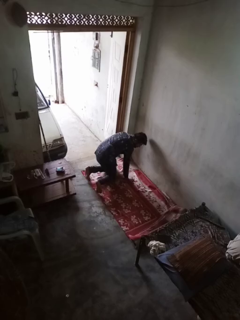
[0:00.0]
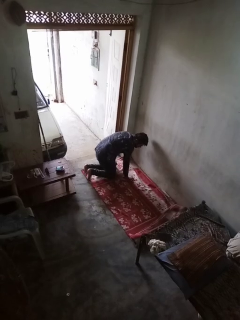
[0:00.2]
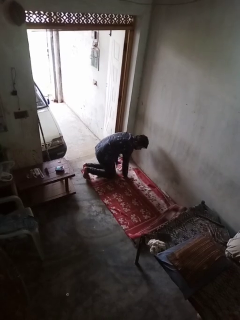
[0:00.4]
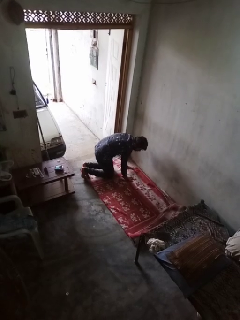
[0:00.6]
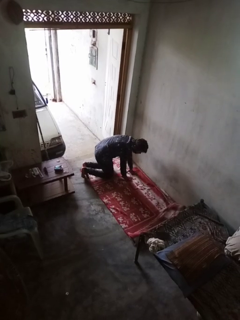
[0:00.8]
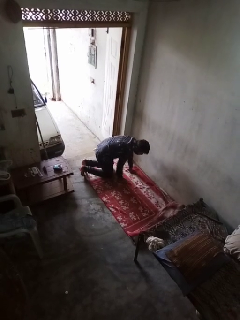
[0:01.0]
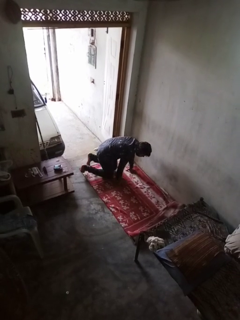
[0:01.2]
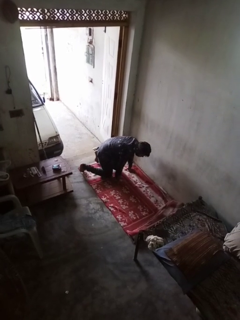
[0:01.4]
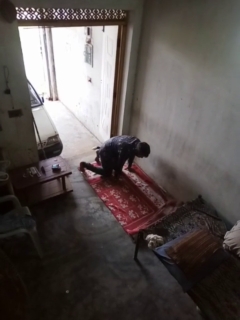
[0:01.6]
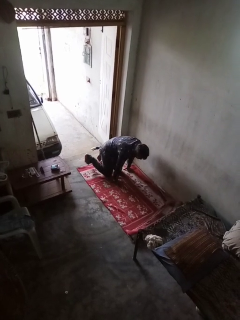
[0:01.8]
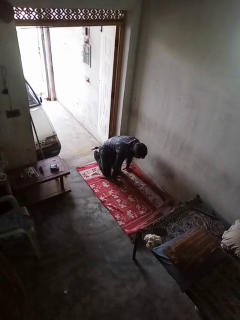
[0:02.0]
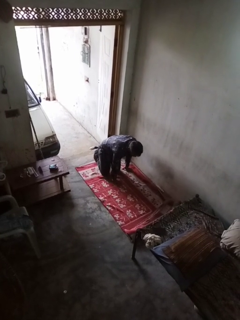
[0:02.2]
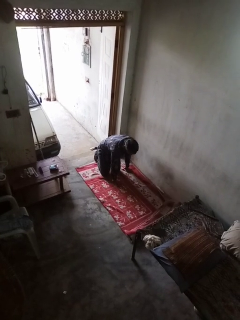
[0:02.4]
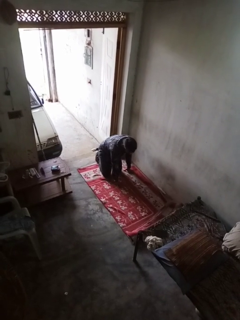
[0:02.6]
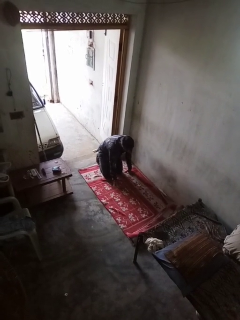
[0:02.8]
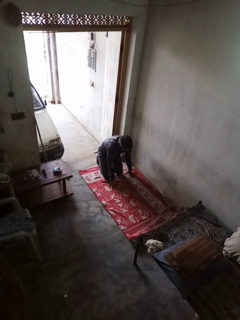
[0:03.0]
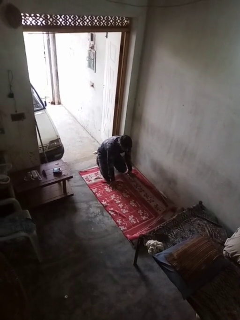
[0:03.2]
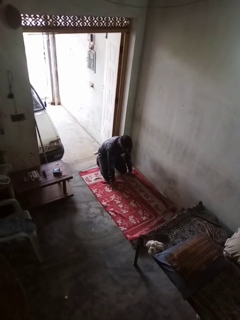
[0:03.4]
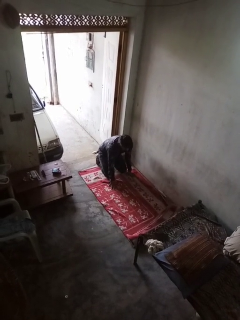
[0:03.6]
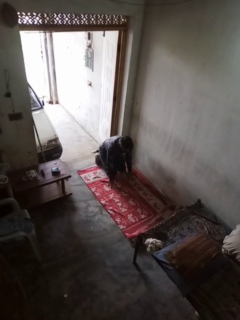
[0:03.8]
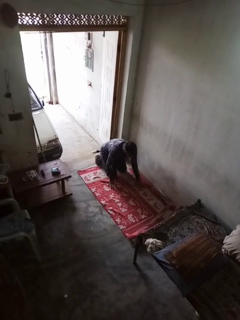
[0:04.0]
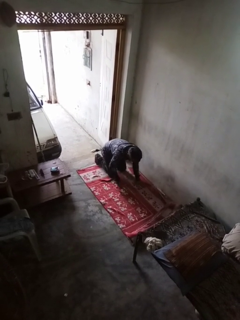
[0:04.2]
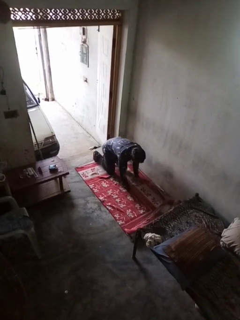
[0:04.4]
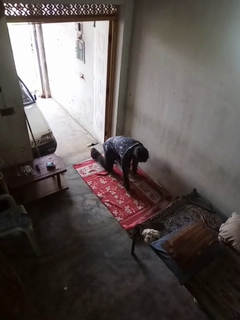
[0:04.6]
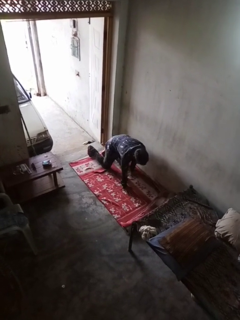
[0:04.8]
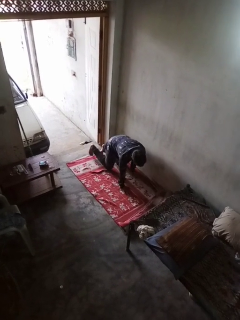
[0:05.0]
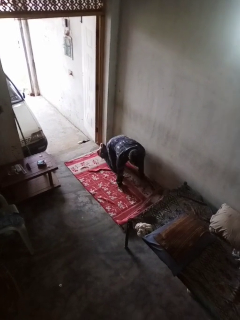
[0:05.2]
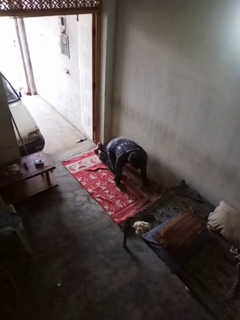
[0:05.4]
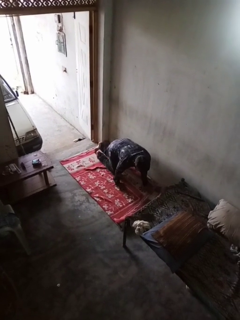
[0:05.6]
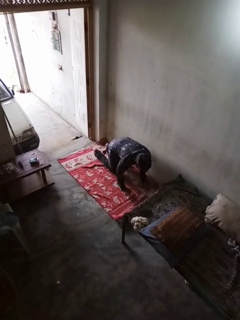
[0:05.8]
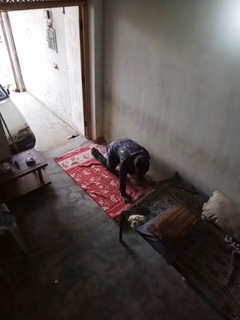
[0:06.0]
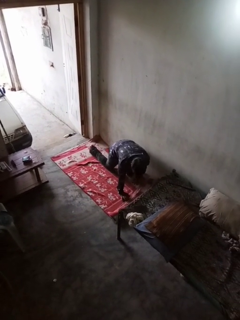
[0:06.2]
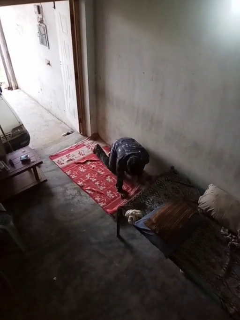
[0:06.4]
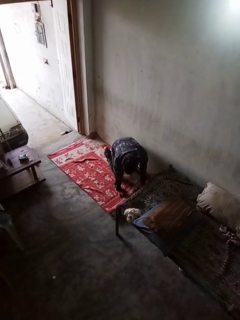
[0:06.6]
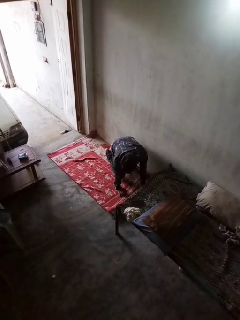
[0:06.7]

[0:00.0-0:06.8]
person crawls

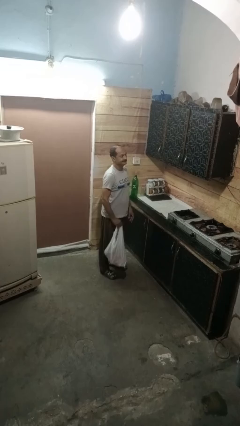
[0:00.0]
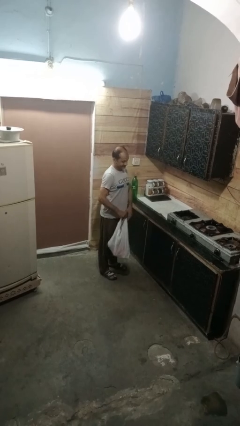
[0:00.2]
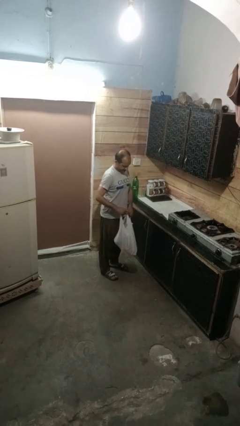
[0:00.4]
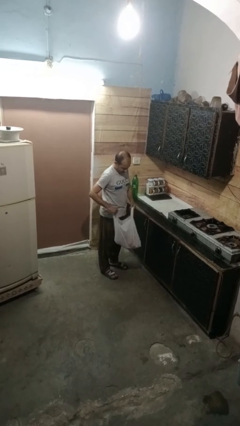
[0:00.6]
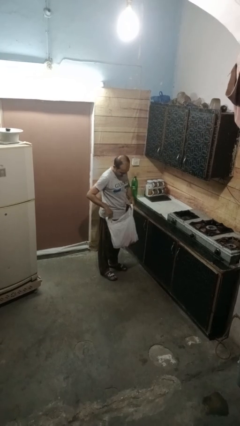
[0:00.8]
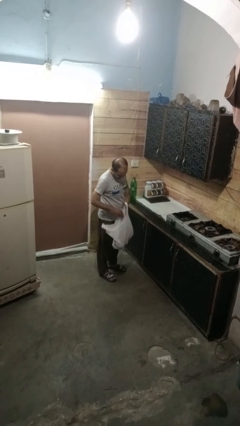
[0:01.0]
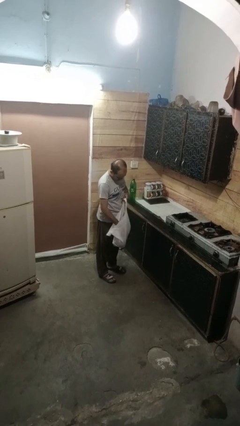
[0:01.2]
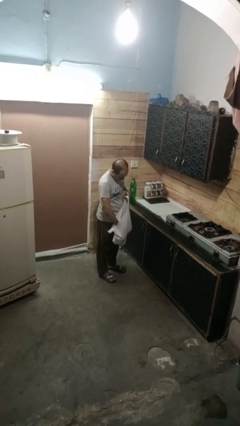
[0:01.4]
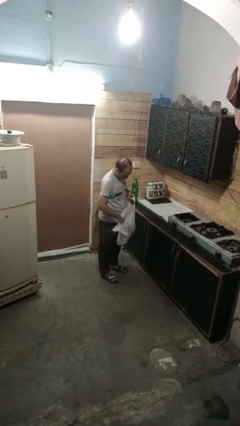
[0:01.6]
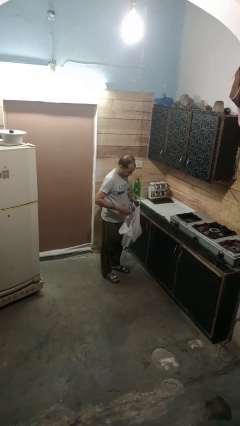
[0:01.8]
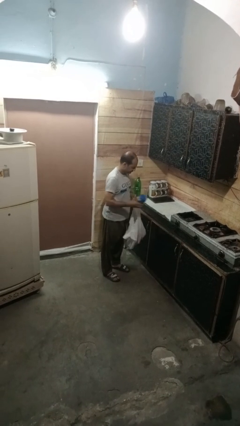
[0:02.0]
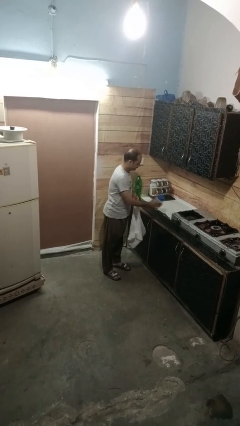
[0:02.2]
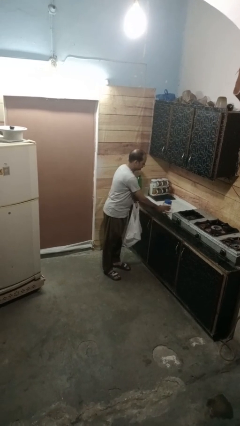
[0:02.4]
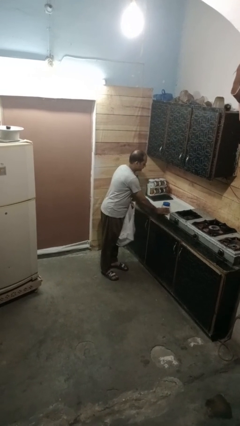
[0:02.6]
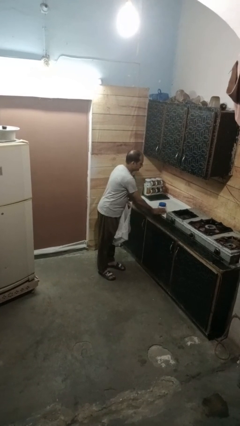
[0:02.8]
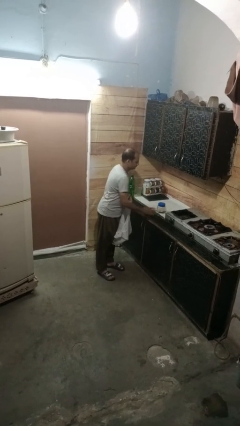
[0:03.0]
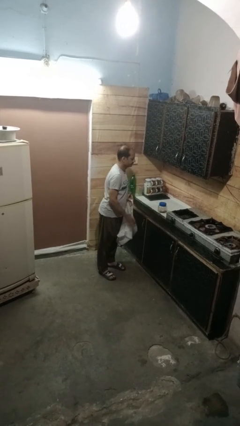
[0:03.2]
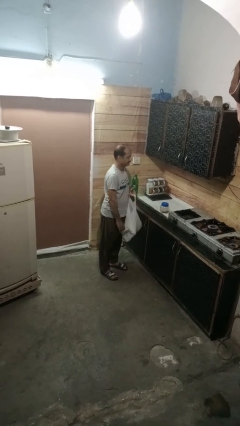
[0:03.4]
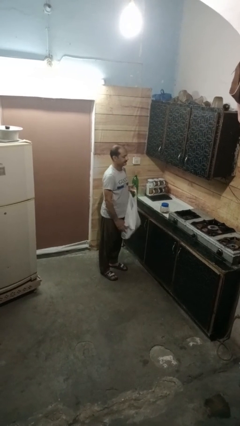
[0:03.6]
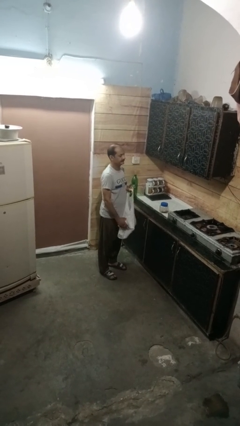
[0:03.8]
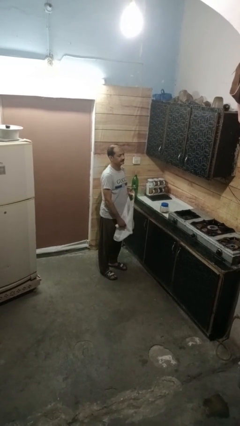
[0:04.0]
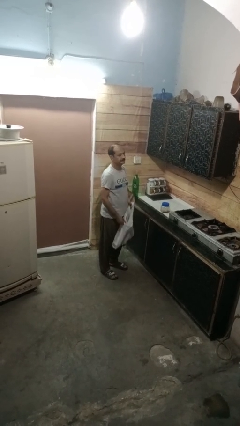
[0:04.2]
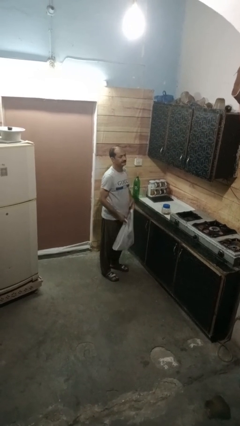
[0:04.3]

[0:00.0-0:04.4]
person takes object from bag

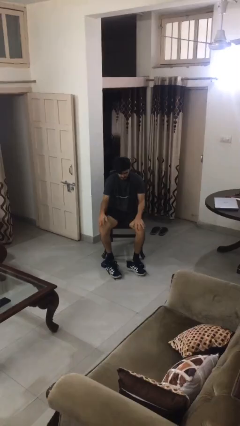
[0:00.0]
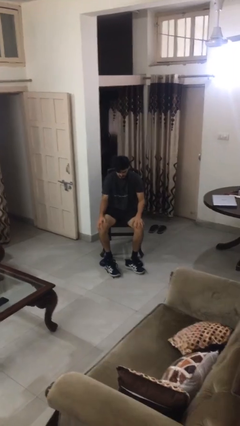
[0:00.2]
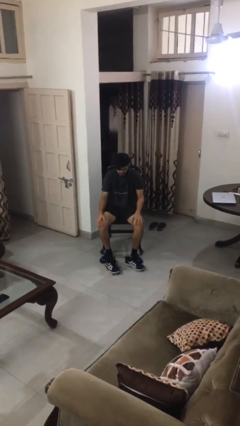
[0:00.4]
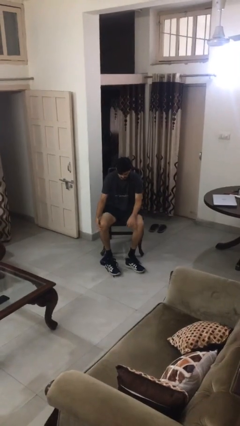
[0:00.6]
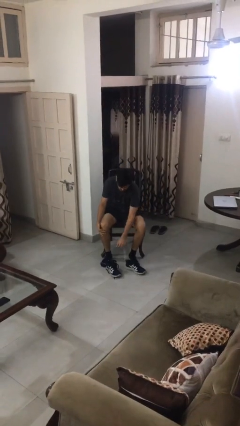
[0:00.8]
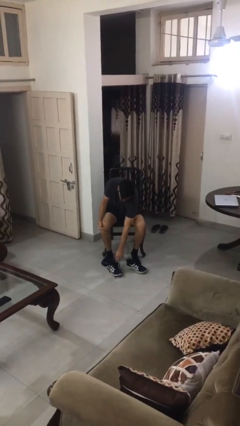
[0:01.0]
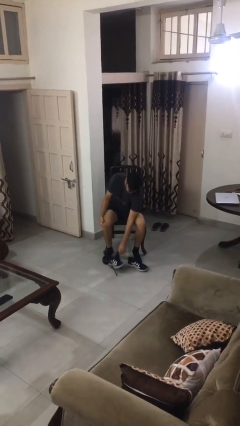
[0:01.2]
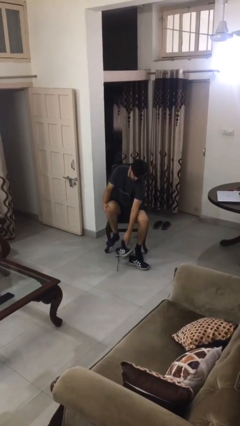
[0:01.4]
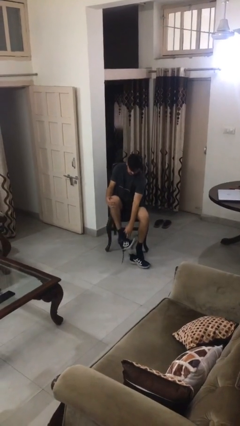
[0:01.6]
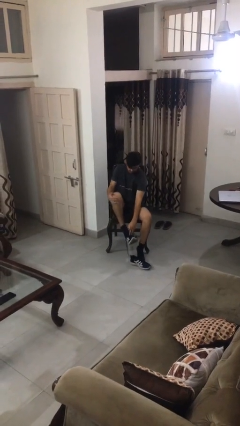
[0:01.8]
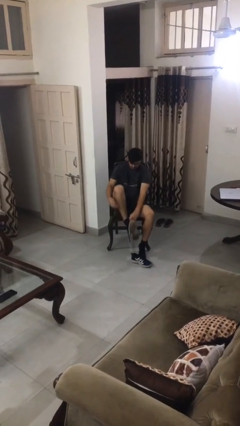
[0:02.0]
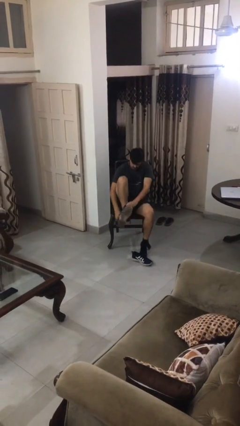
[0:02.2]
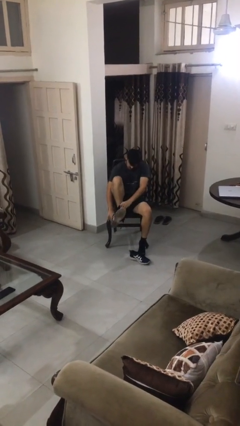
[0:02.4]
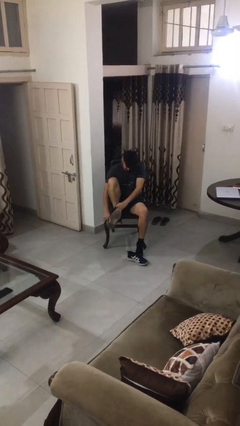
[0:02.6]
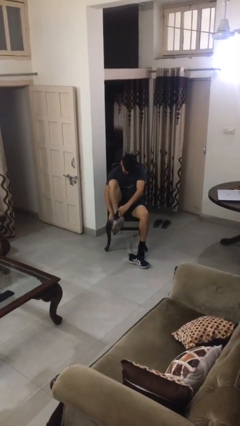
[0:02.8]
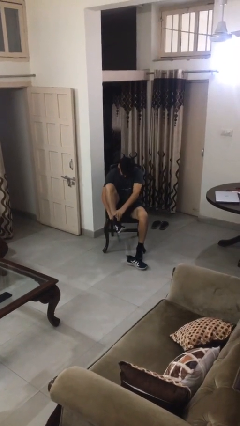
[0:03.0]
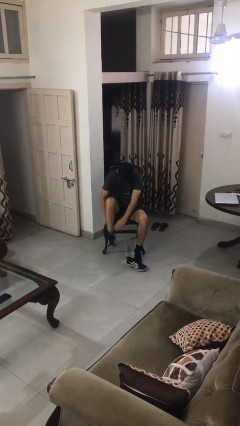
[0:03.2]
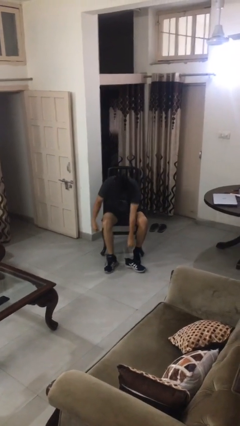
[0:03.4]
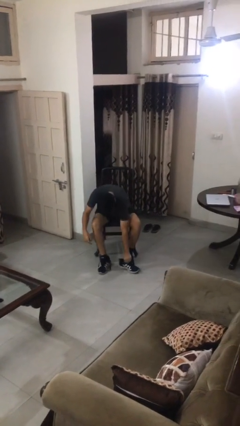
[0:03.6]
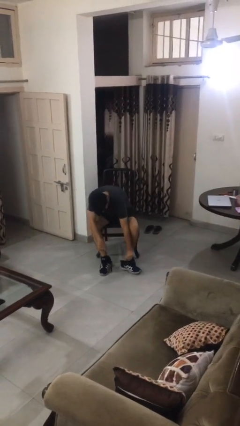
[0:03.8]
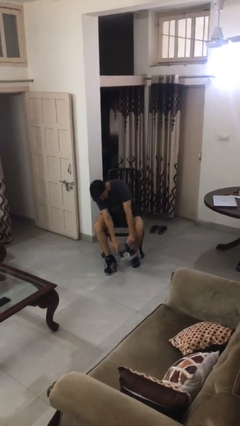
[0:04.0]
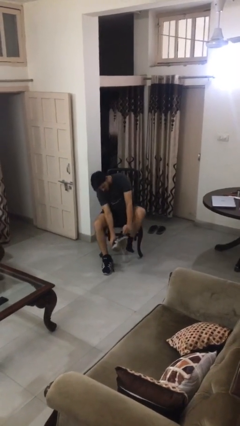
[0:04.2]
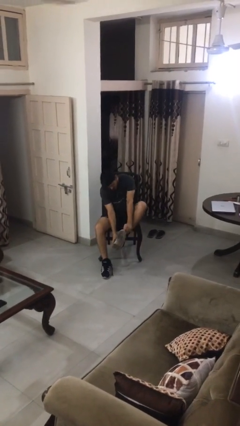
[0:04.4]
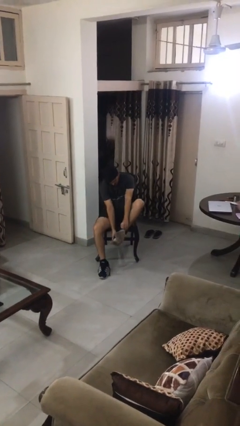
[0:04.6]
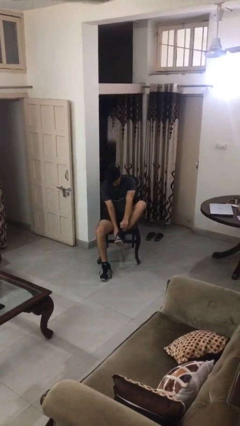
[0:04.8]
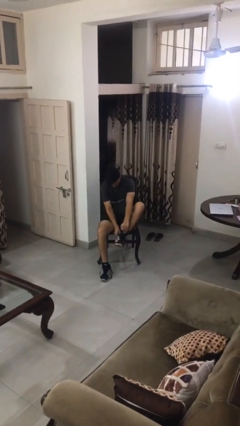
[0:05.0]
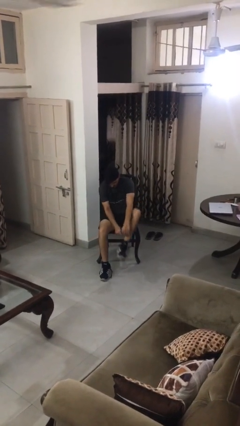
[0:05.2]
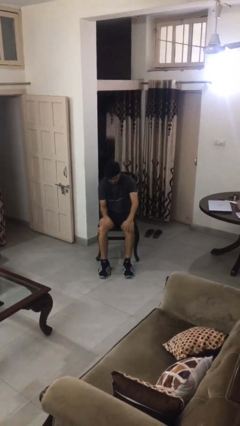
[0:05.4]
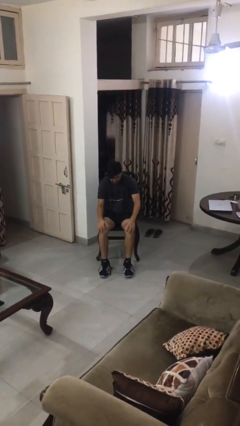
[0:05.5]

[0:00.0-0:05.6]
person puts on shoes

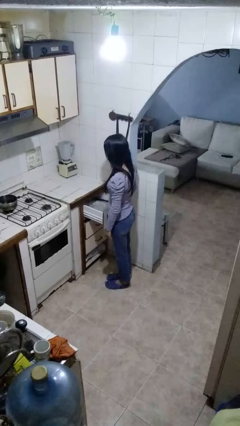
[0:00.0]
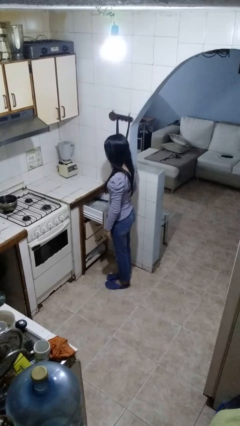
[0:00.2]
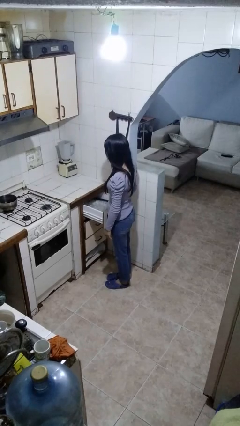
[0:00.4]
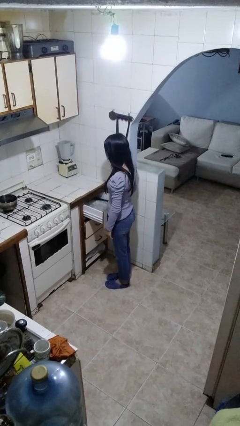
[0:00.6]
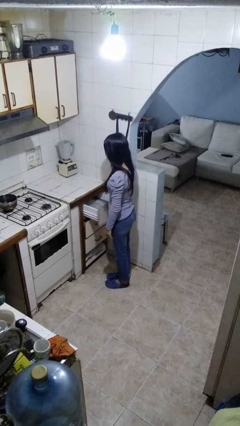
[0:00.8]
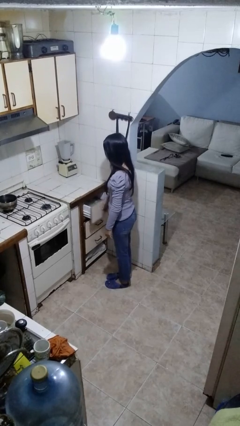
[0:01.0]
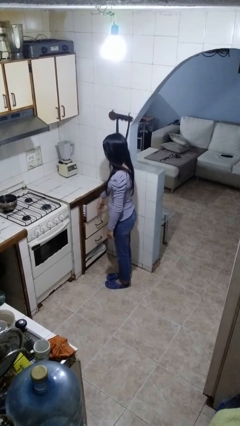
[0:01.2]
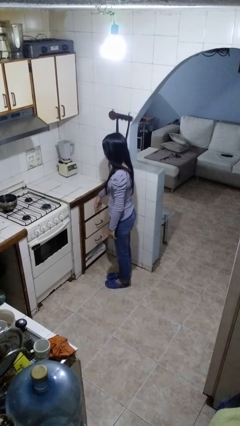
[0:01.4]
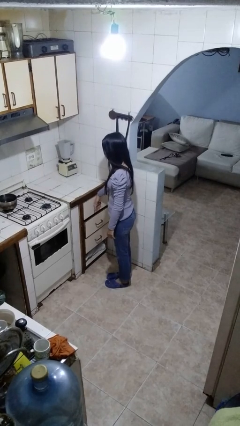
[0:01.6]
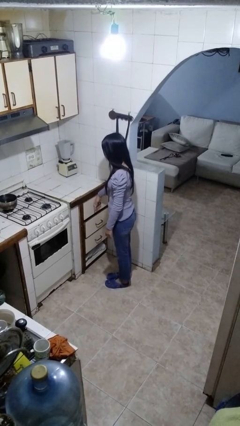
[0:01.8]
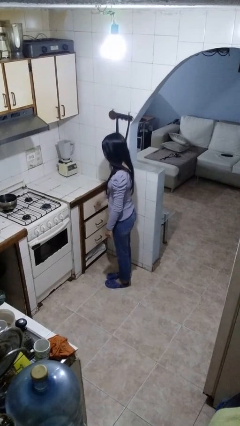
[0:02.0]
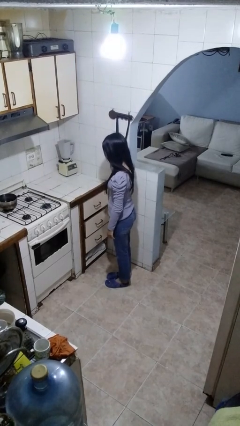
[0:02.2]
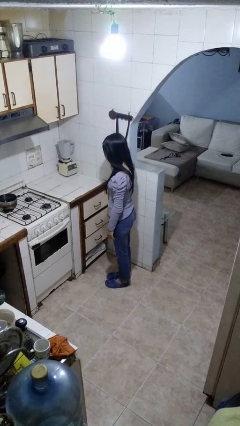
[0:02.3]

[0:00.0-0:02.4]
person closes cabinet
